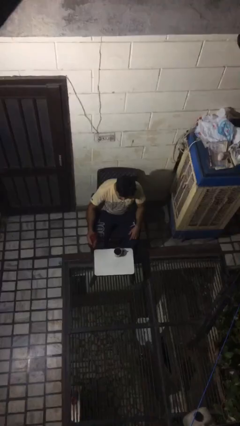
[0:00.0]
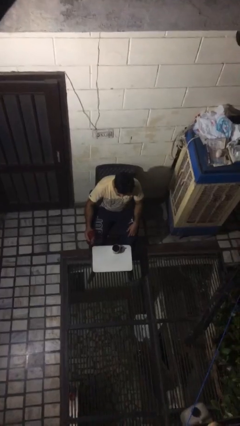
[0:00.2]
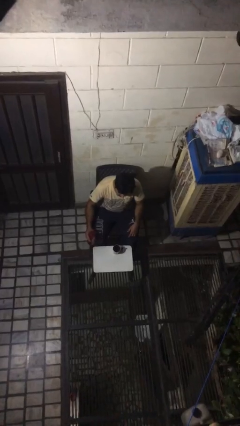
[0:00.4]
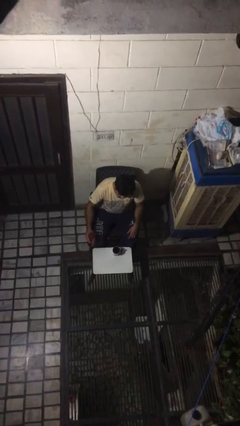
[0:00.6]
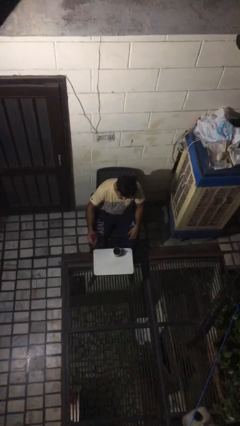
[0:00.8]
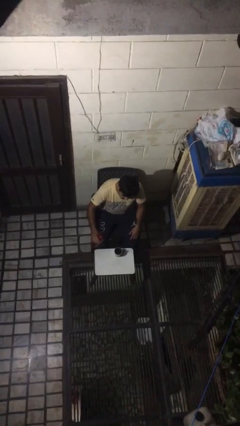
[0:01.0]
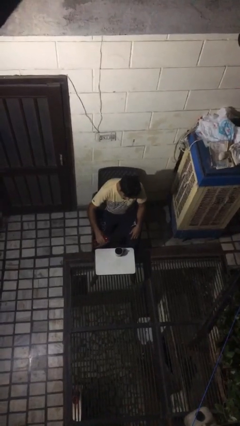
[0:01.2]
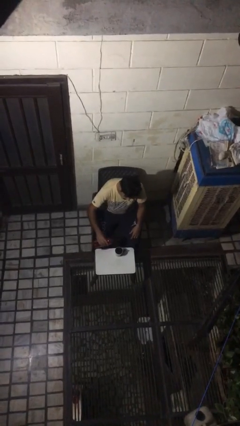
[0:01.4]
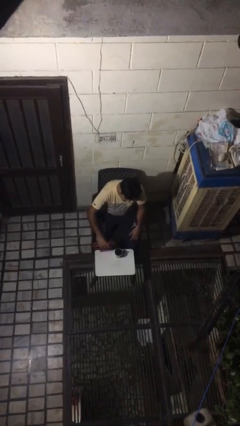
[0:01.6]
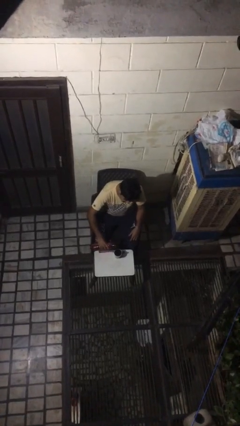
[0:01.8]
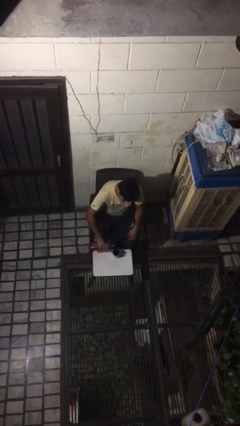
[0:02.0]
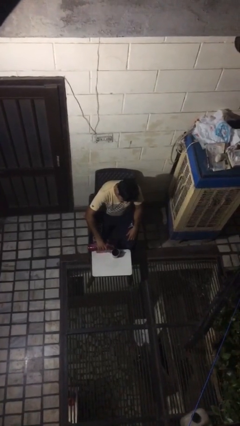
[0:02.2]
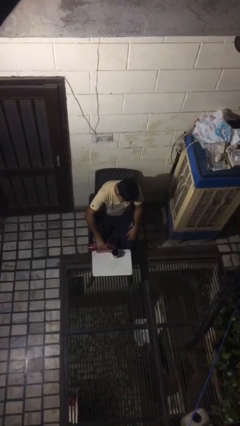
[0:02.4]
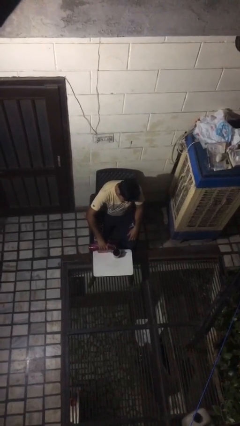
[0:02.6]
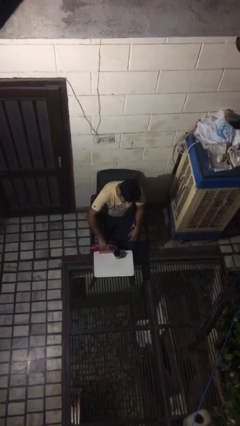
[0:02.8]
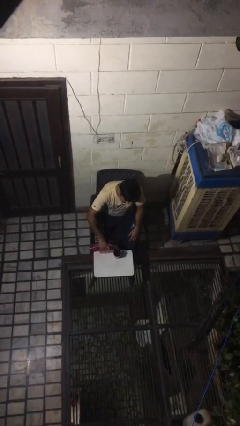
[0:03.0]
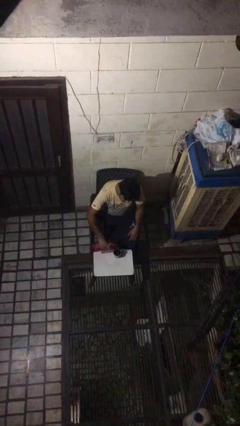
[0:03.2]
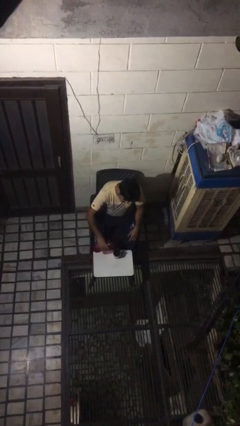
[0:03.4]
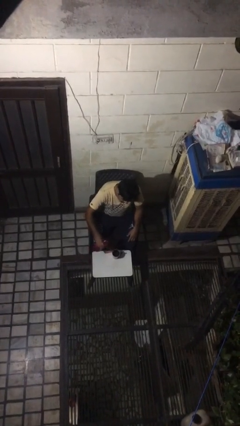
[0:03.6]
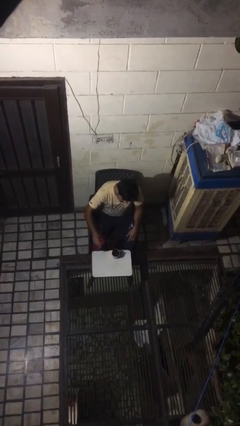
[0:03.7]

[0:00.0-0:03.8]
person pours liquid into cup

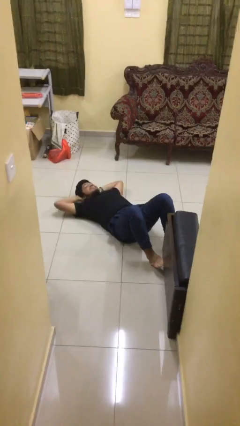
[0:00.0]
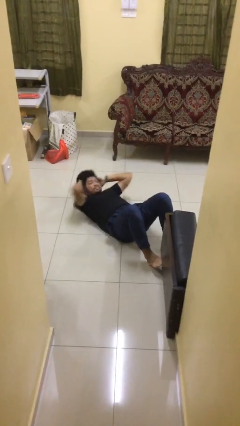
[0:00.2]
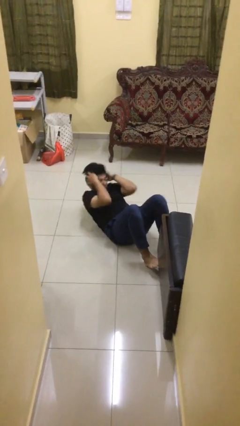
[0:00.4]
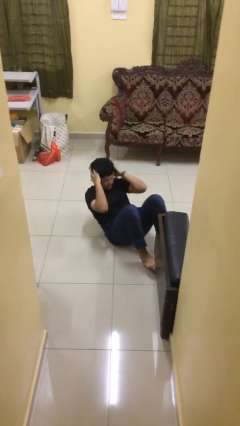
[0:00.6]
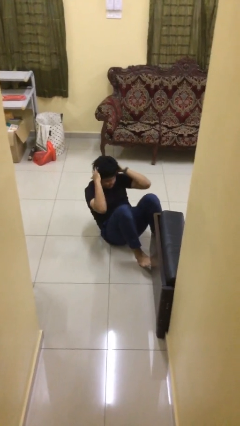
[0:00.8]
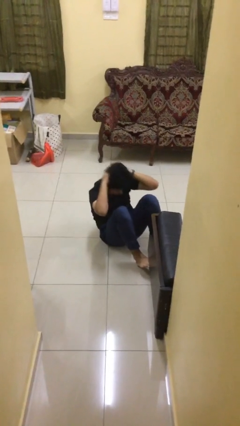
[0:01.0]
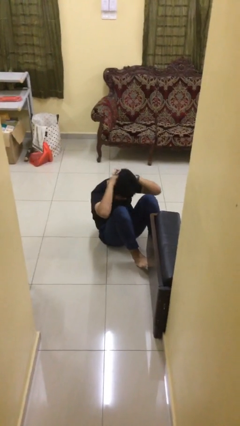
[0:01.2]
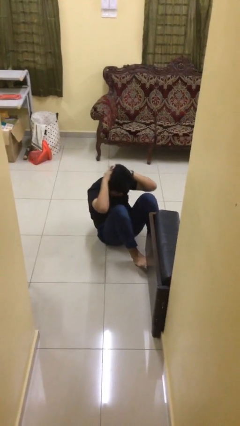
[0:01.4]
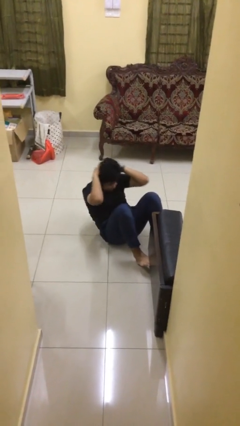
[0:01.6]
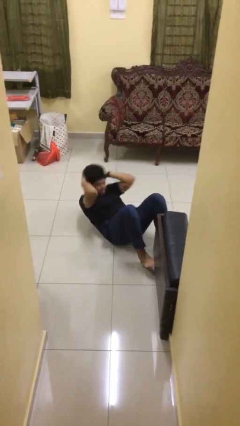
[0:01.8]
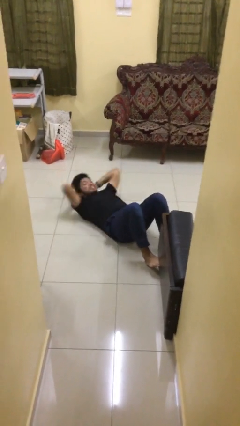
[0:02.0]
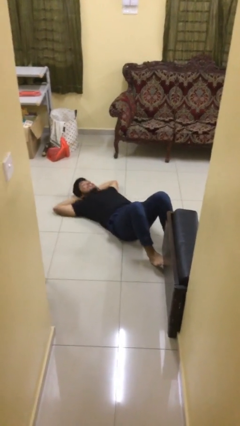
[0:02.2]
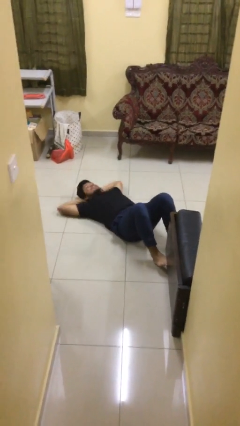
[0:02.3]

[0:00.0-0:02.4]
person exercises with situp

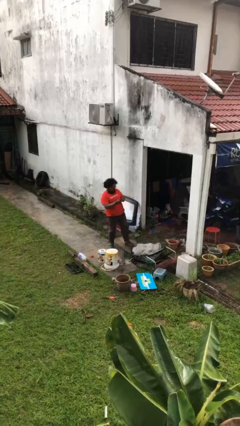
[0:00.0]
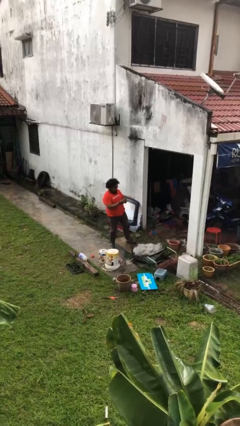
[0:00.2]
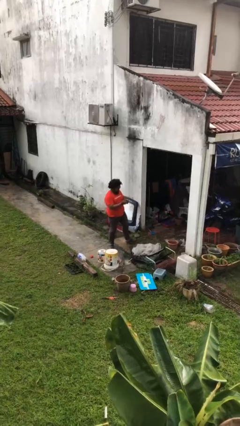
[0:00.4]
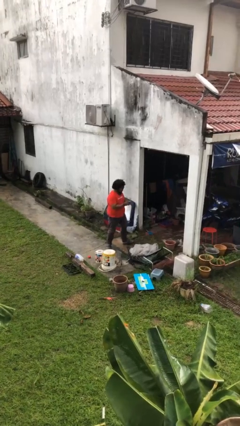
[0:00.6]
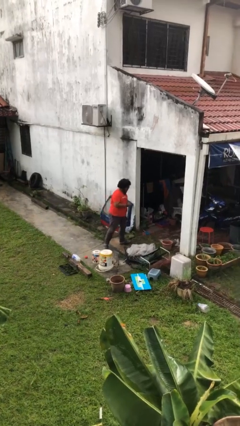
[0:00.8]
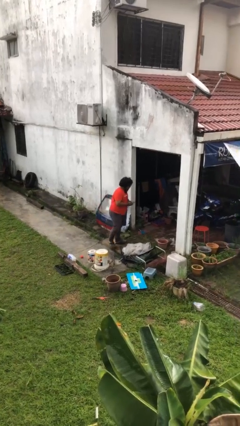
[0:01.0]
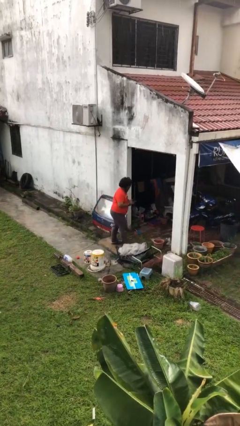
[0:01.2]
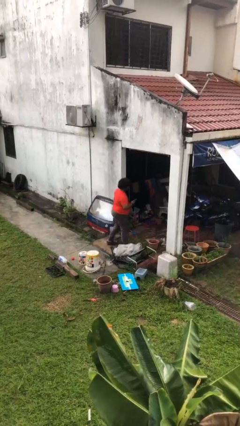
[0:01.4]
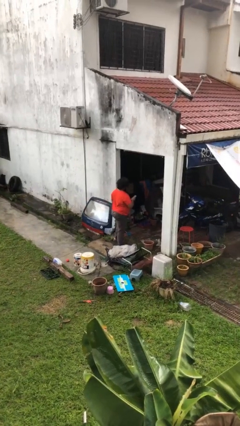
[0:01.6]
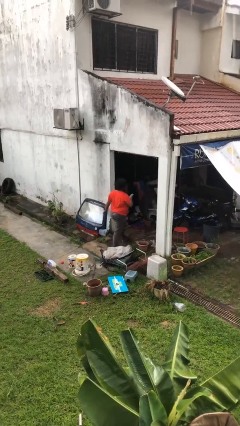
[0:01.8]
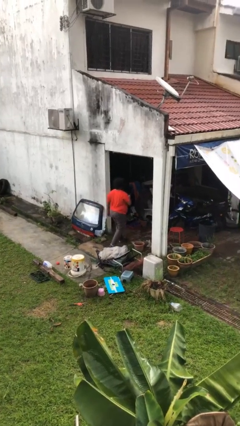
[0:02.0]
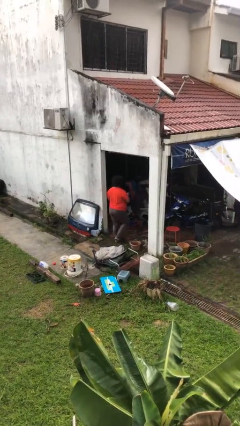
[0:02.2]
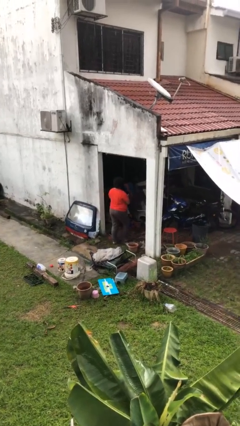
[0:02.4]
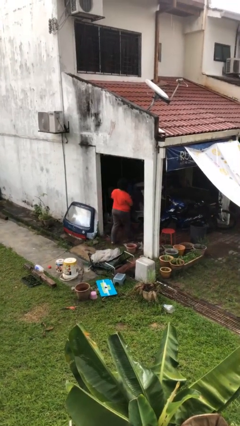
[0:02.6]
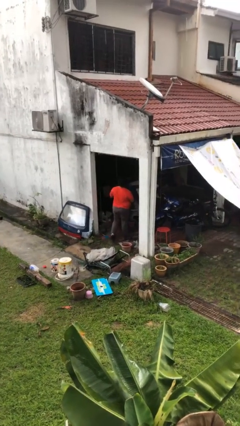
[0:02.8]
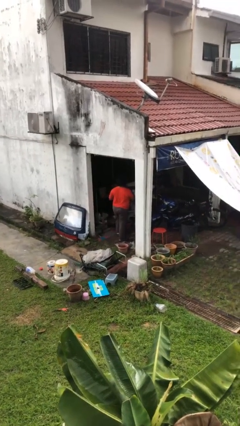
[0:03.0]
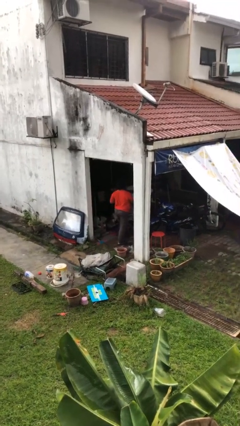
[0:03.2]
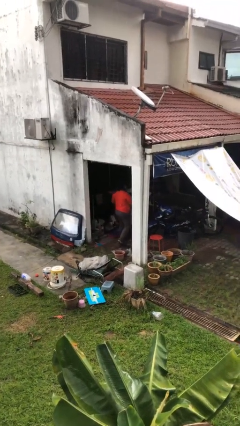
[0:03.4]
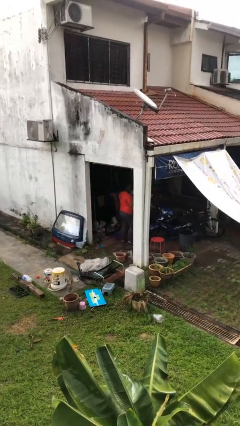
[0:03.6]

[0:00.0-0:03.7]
person exits scene through structure

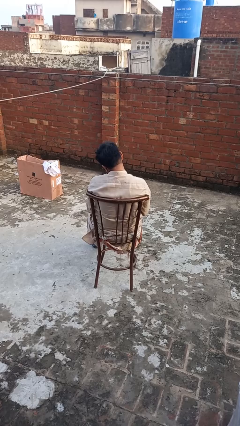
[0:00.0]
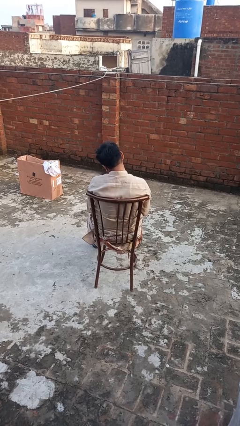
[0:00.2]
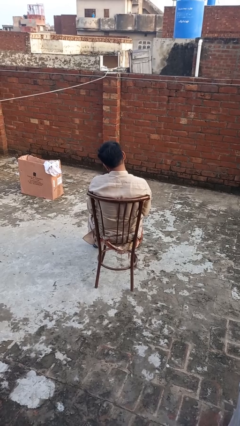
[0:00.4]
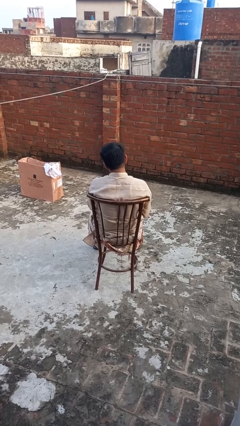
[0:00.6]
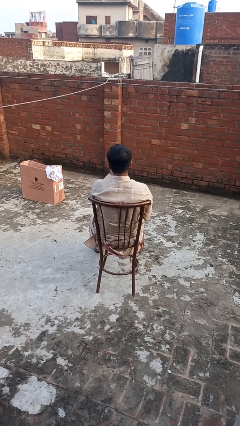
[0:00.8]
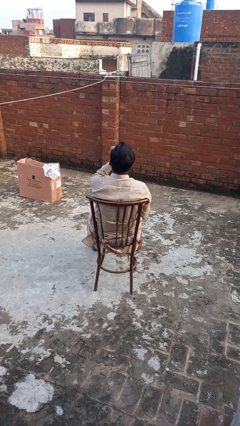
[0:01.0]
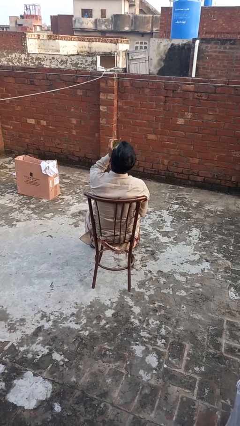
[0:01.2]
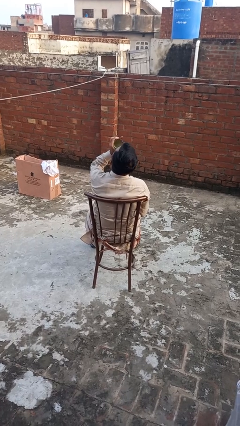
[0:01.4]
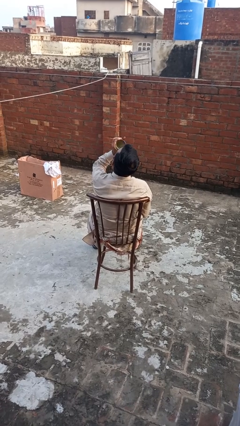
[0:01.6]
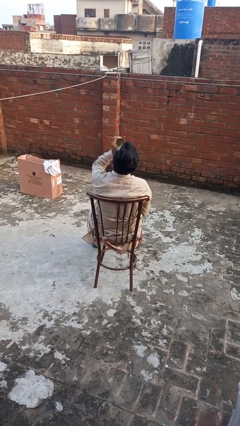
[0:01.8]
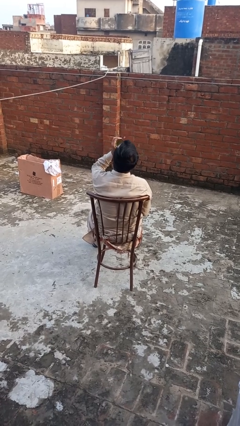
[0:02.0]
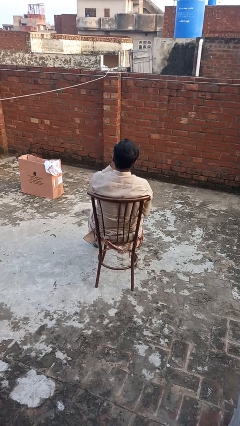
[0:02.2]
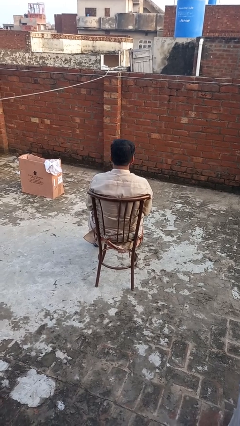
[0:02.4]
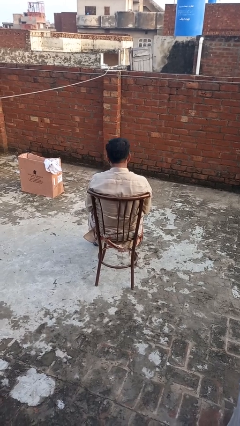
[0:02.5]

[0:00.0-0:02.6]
person drinks from mug

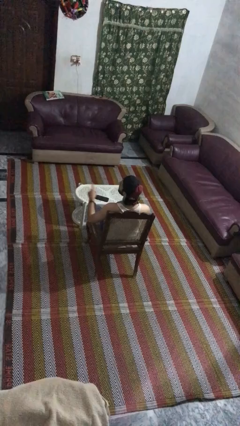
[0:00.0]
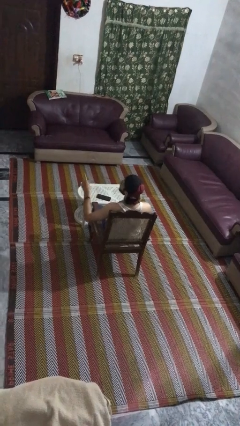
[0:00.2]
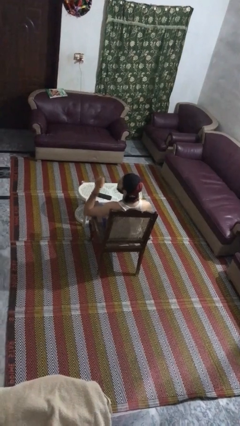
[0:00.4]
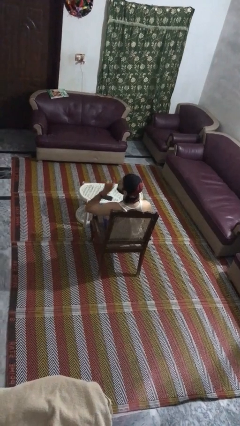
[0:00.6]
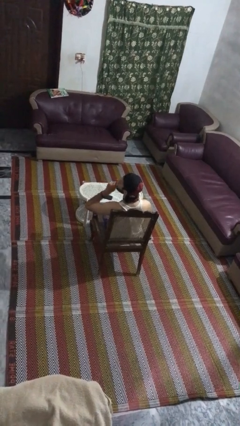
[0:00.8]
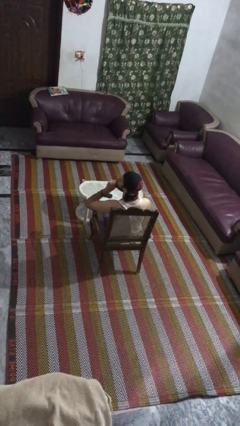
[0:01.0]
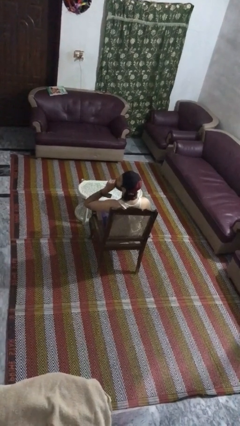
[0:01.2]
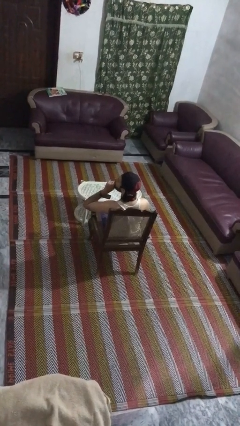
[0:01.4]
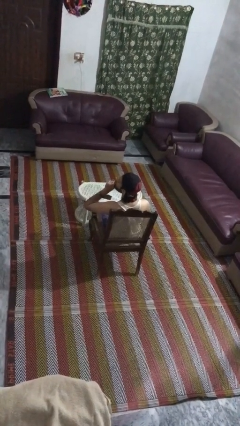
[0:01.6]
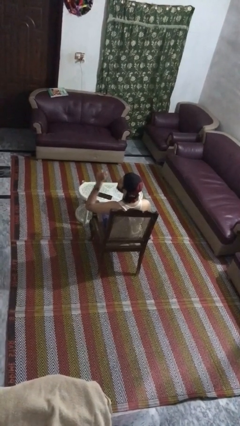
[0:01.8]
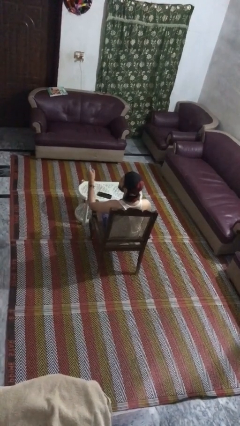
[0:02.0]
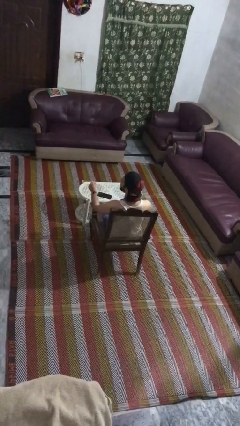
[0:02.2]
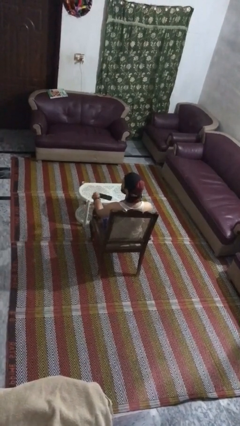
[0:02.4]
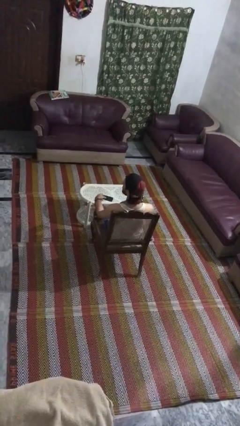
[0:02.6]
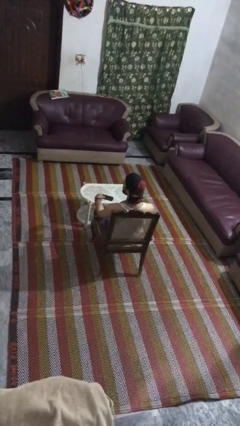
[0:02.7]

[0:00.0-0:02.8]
person gestures be quiet

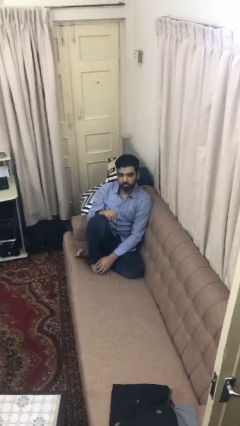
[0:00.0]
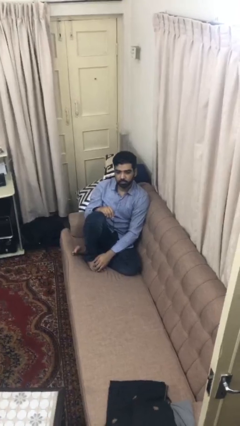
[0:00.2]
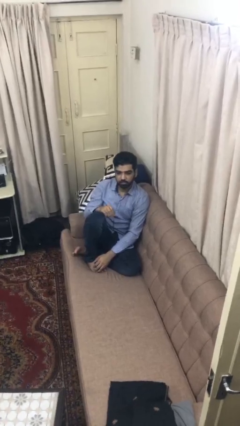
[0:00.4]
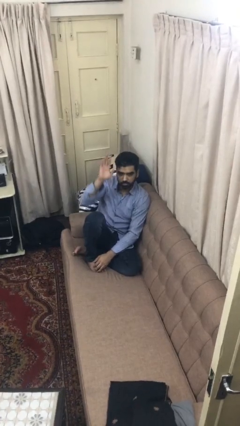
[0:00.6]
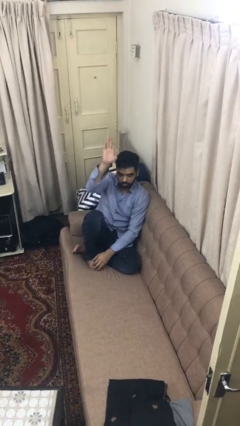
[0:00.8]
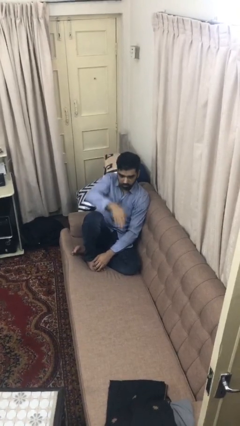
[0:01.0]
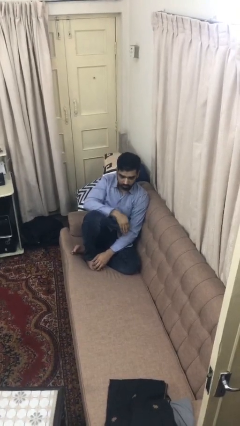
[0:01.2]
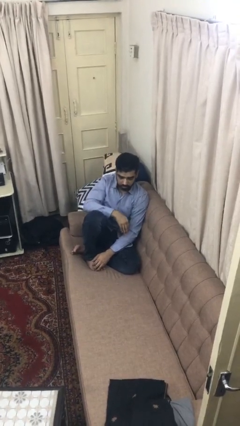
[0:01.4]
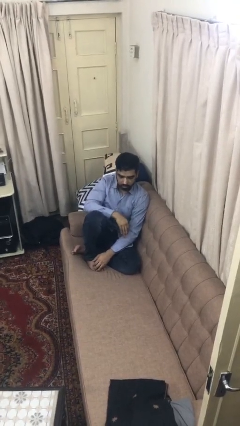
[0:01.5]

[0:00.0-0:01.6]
person gestures swipe down

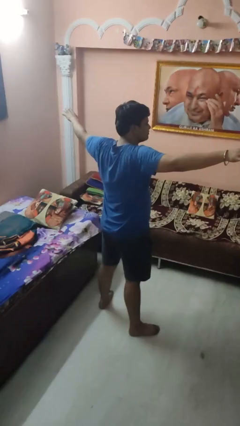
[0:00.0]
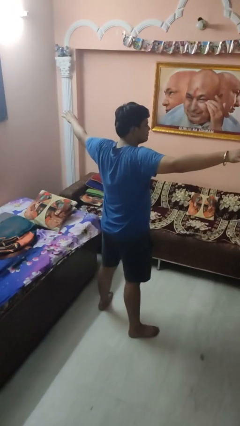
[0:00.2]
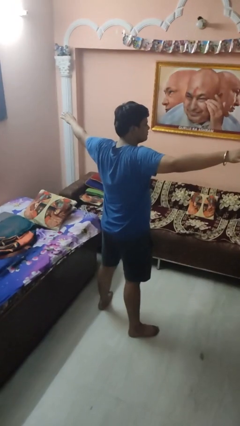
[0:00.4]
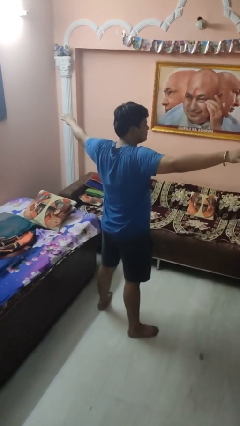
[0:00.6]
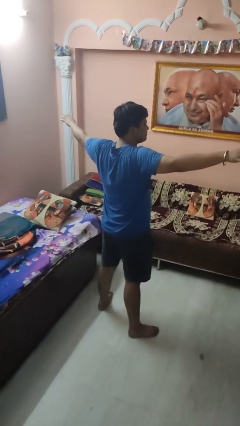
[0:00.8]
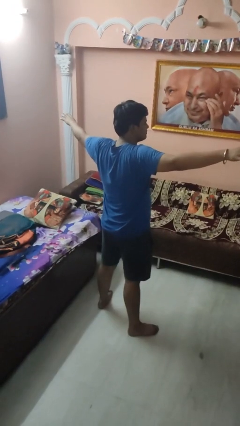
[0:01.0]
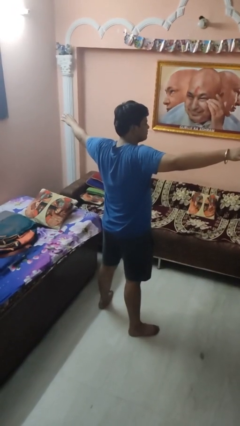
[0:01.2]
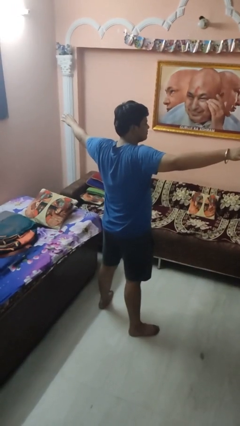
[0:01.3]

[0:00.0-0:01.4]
person stretches arms to side
